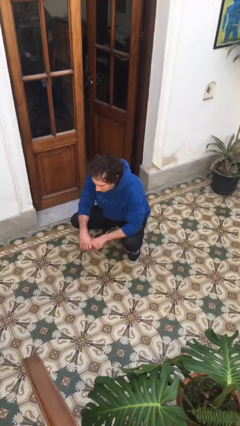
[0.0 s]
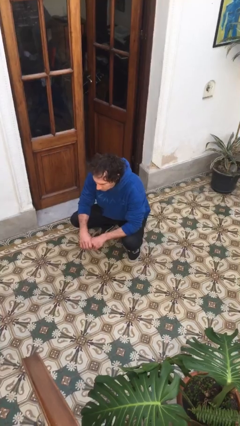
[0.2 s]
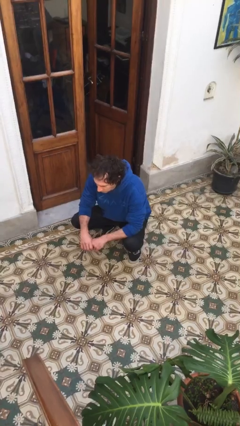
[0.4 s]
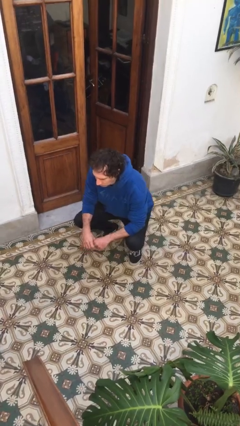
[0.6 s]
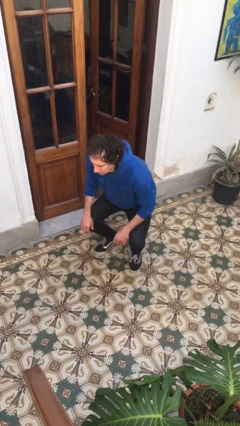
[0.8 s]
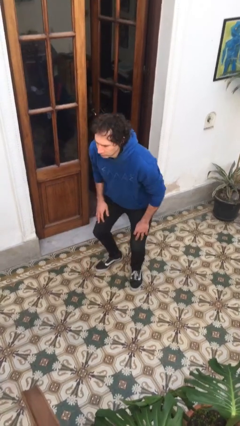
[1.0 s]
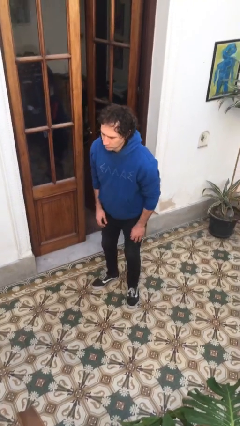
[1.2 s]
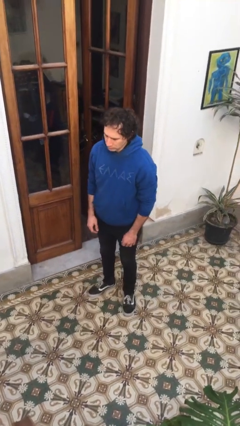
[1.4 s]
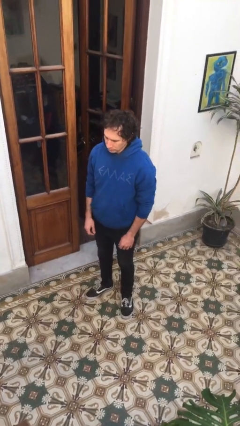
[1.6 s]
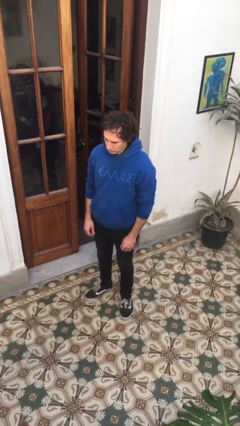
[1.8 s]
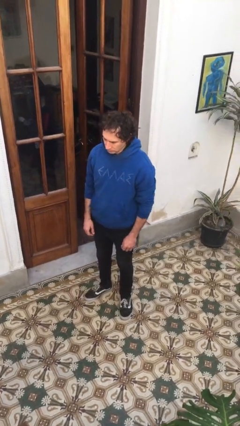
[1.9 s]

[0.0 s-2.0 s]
person stands up

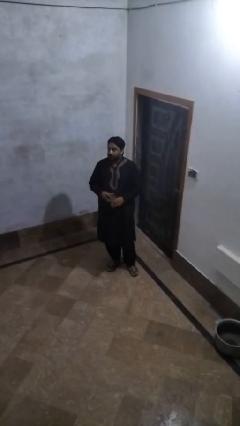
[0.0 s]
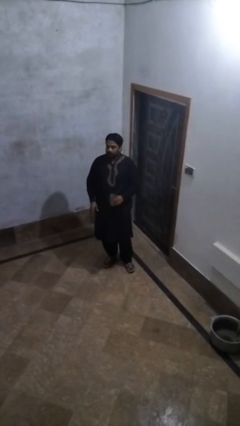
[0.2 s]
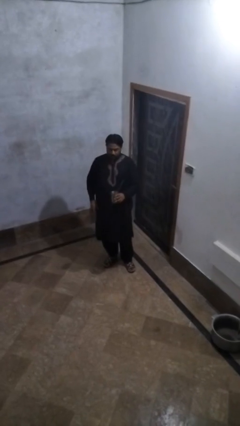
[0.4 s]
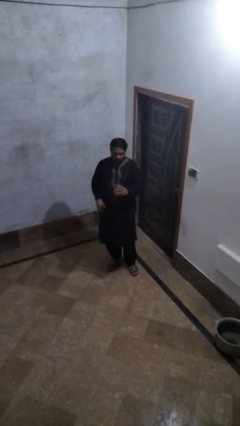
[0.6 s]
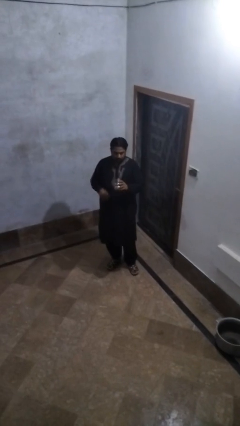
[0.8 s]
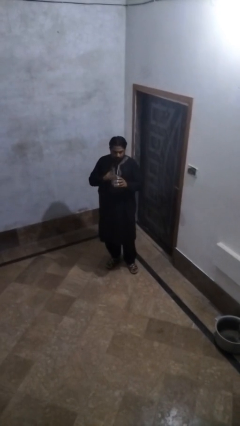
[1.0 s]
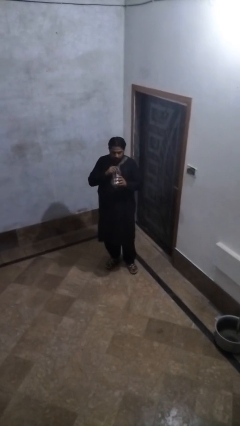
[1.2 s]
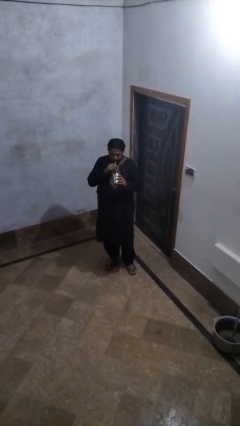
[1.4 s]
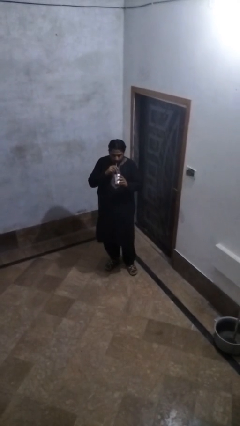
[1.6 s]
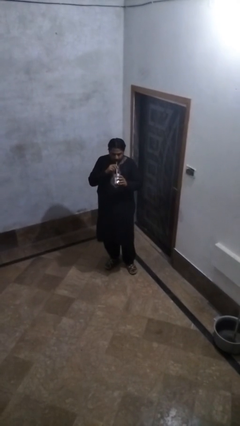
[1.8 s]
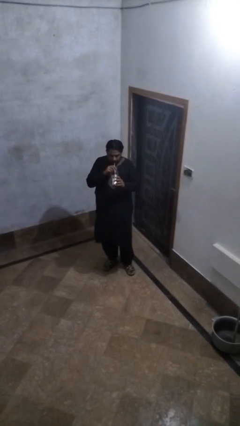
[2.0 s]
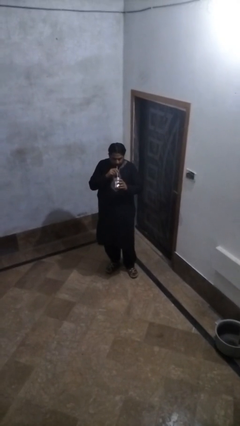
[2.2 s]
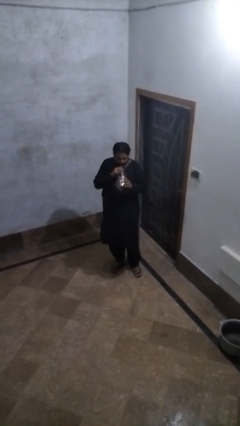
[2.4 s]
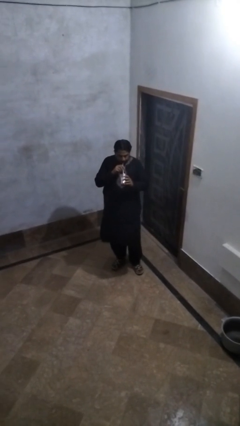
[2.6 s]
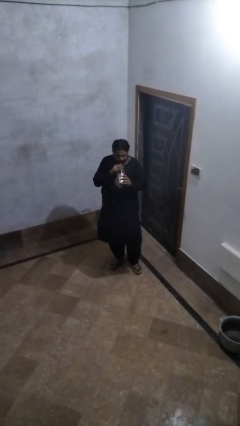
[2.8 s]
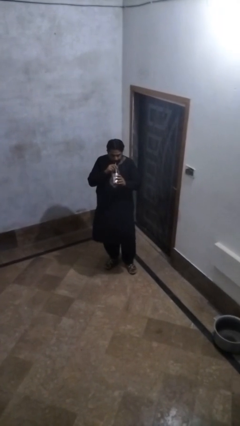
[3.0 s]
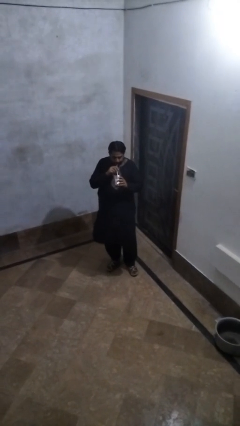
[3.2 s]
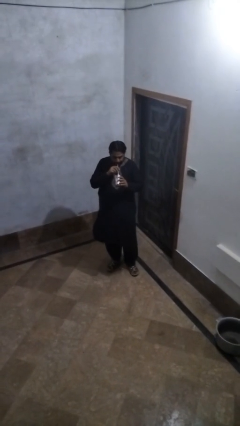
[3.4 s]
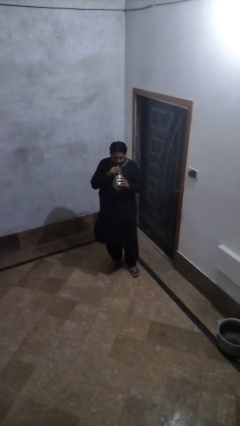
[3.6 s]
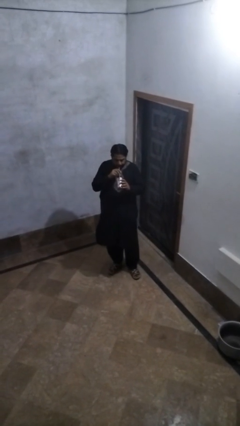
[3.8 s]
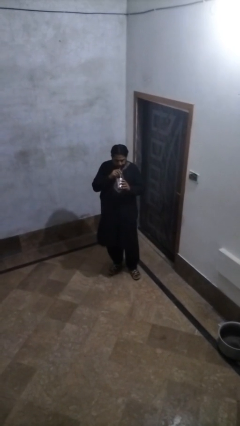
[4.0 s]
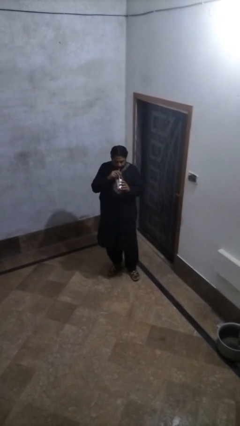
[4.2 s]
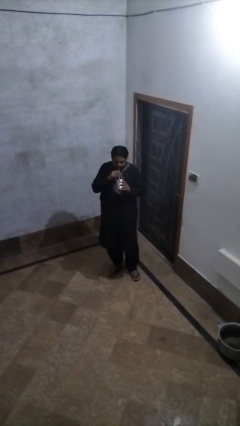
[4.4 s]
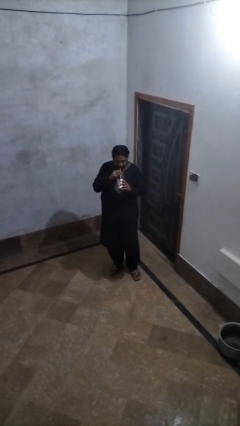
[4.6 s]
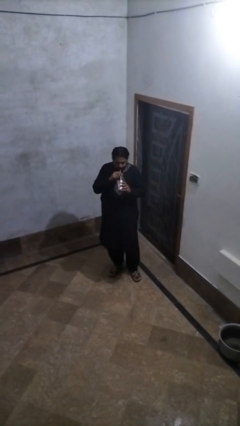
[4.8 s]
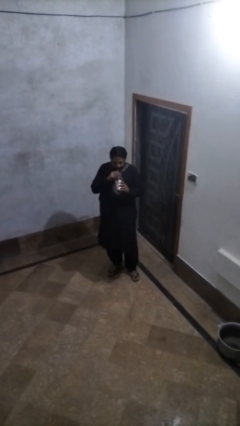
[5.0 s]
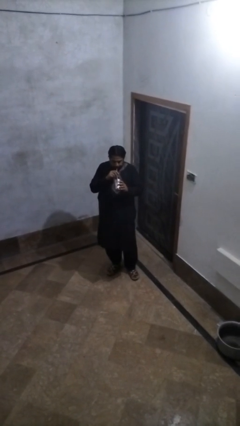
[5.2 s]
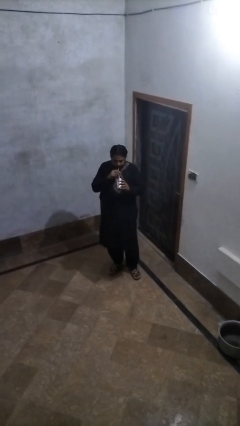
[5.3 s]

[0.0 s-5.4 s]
person drinks from straw

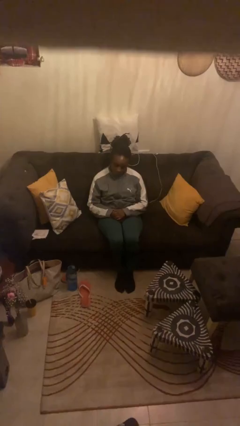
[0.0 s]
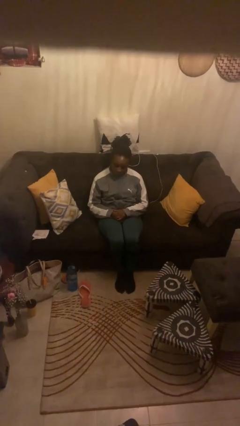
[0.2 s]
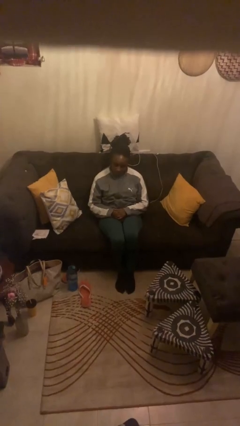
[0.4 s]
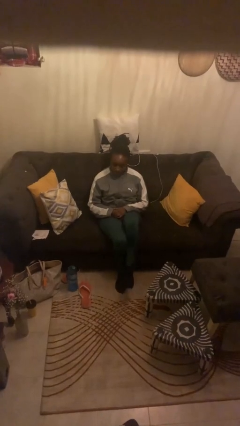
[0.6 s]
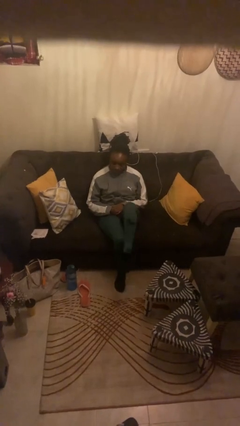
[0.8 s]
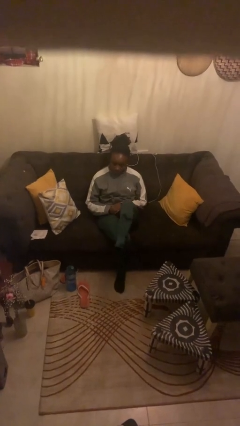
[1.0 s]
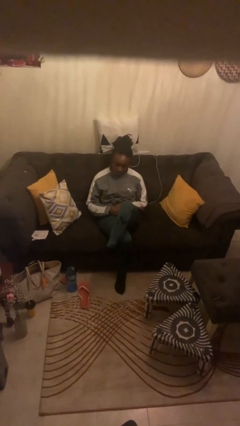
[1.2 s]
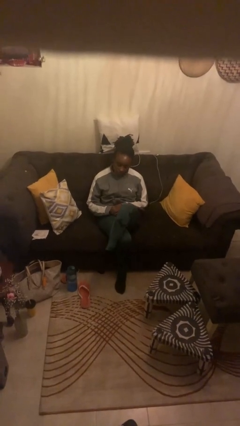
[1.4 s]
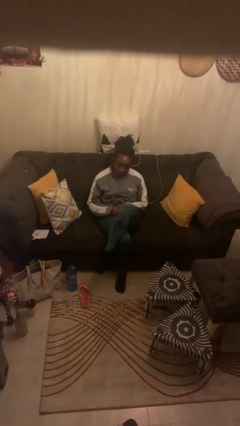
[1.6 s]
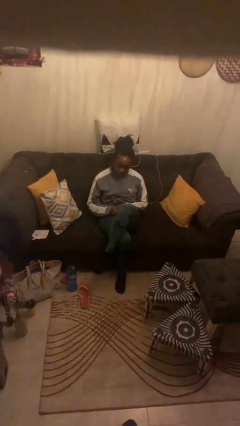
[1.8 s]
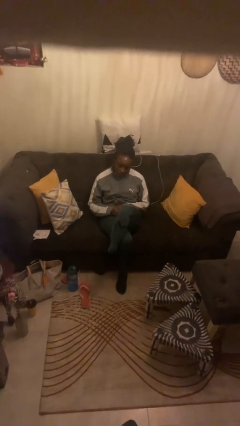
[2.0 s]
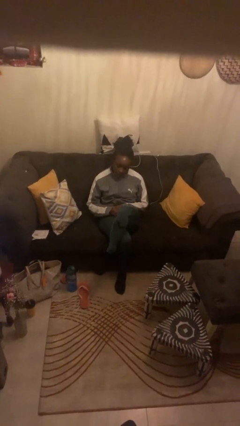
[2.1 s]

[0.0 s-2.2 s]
person crosses legs

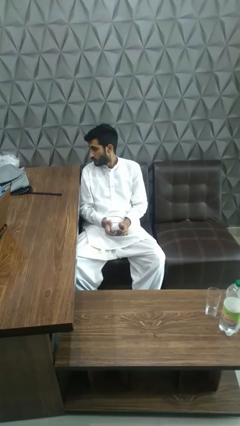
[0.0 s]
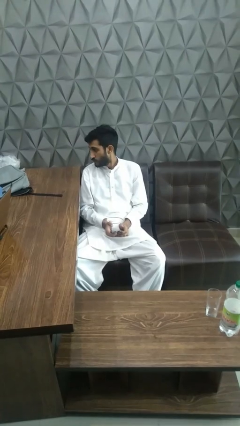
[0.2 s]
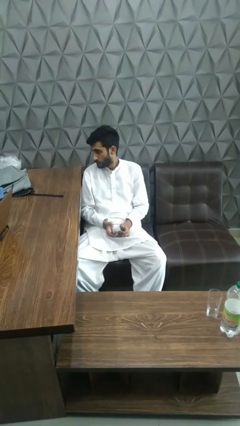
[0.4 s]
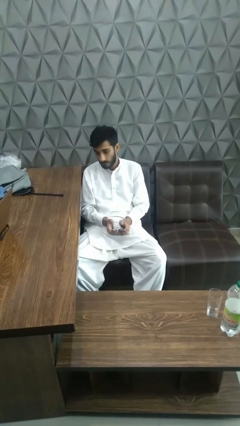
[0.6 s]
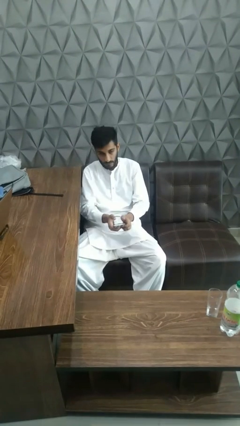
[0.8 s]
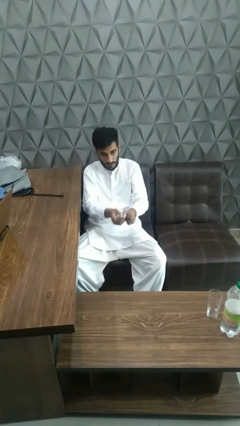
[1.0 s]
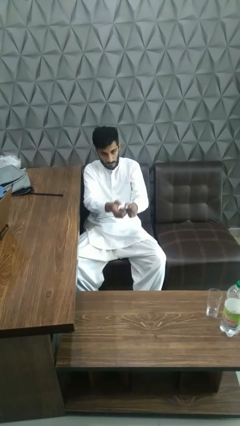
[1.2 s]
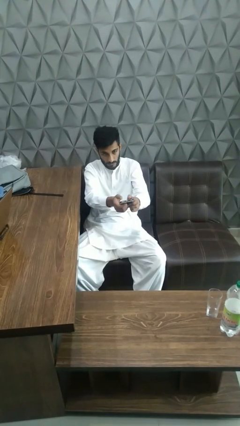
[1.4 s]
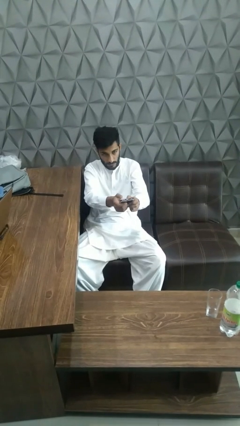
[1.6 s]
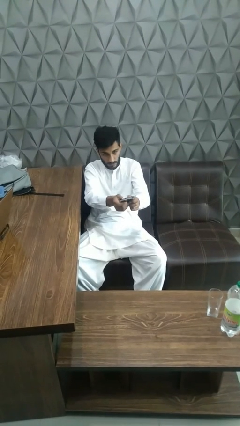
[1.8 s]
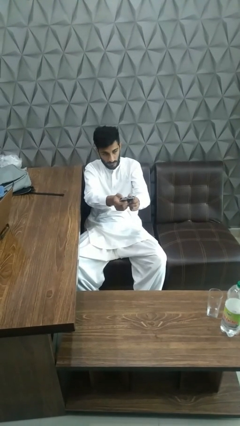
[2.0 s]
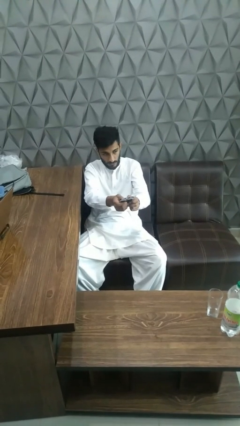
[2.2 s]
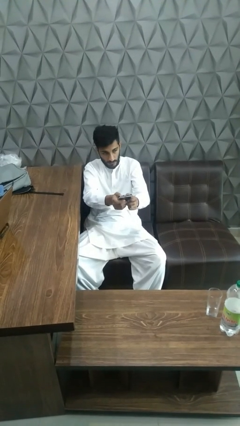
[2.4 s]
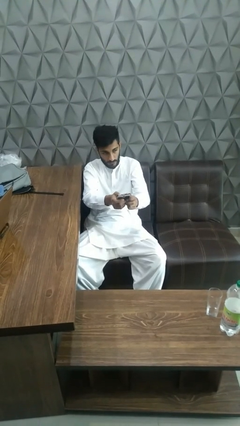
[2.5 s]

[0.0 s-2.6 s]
person uses television remote

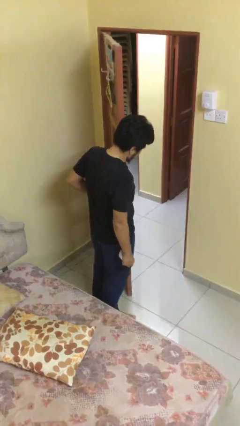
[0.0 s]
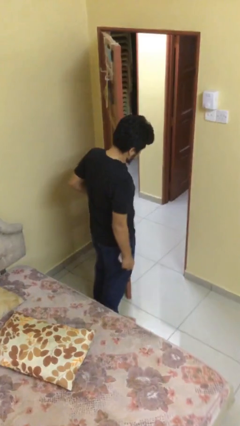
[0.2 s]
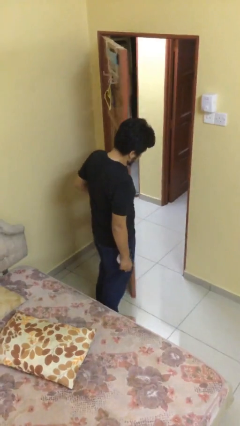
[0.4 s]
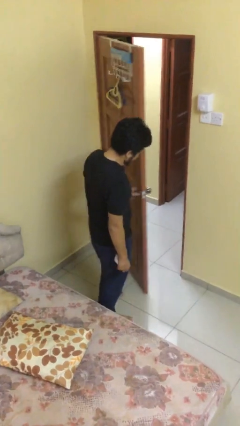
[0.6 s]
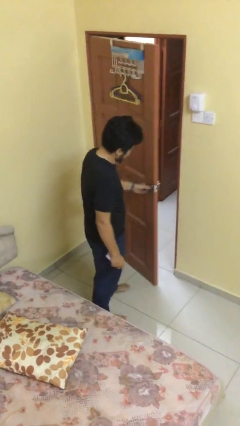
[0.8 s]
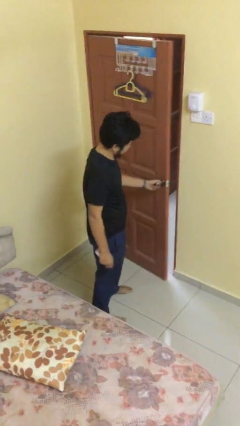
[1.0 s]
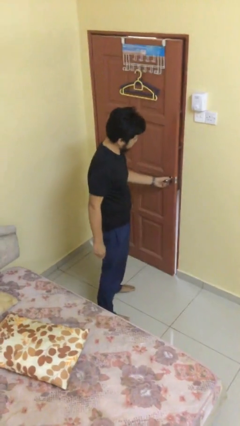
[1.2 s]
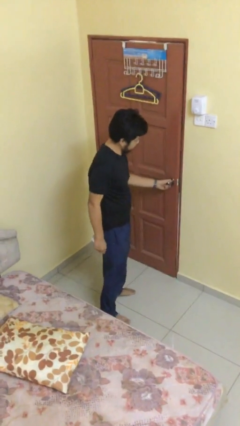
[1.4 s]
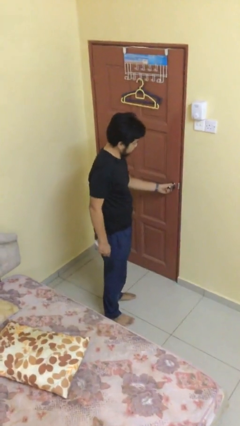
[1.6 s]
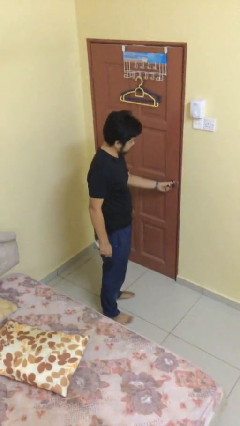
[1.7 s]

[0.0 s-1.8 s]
person closes facility door

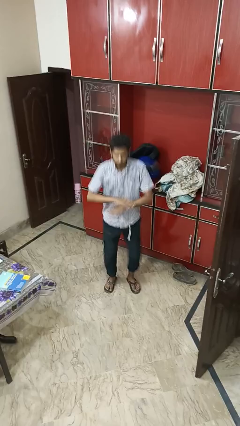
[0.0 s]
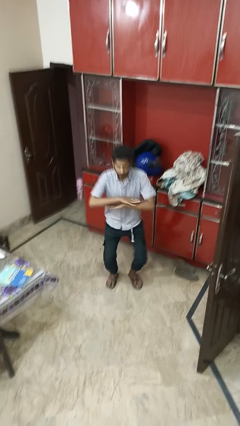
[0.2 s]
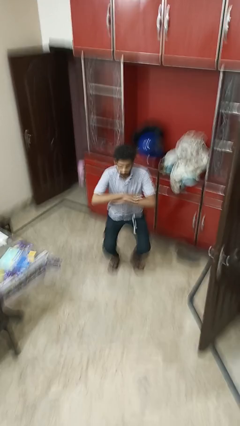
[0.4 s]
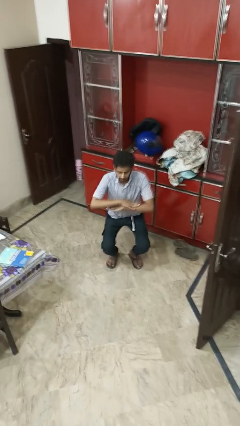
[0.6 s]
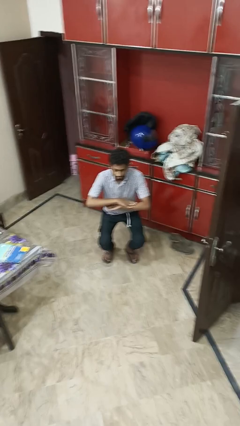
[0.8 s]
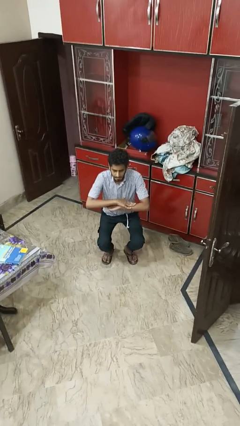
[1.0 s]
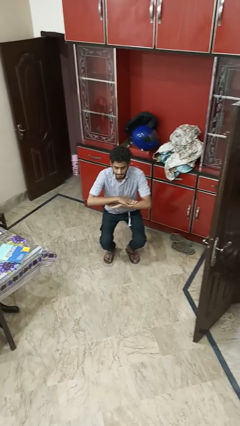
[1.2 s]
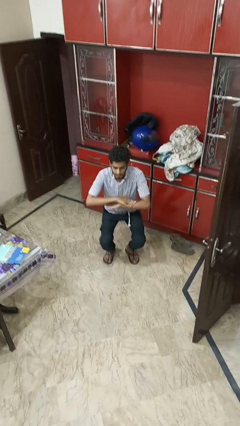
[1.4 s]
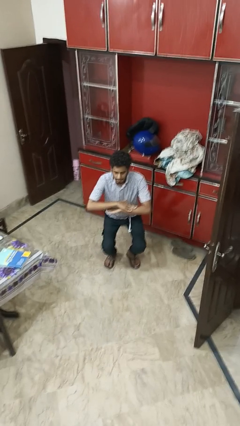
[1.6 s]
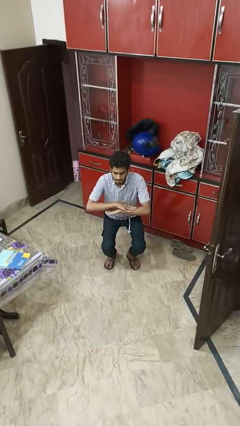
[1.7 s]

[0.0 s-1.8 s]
person squats

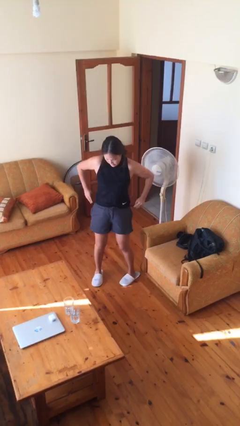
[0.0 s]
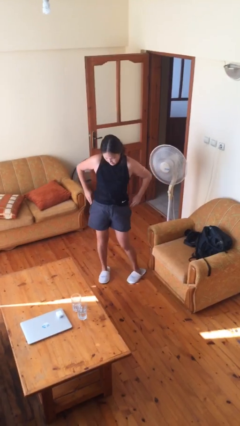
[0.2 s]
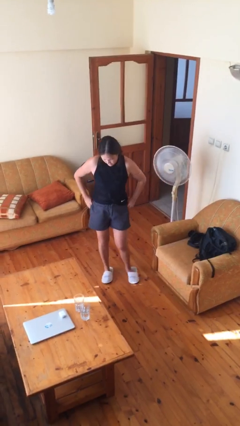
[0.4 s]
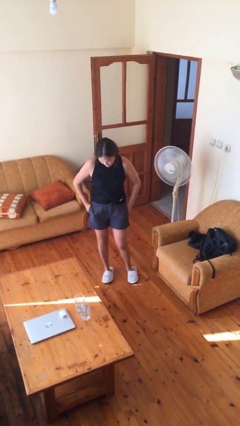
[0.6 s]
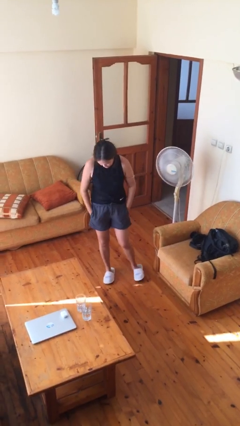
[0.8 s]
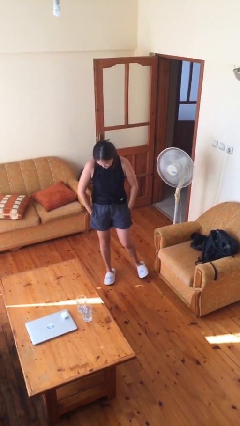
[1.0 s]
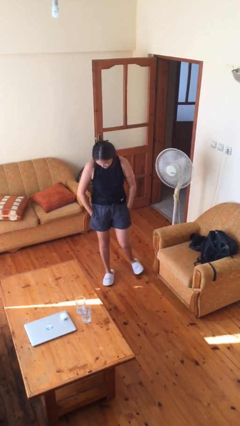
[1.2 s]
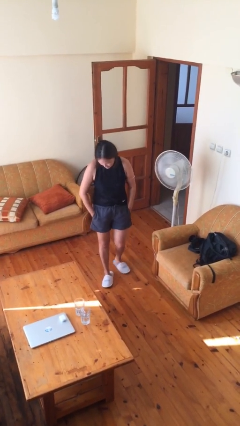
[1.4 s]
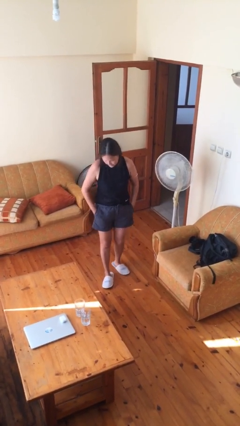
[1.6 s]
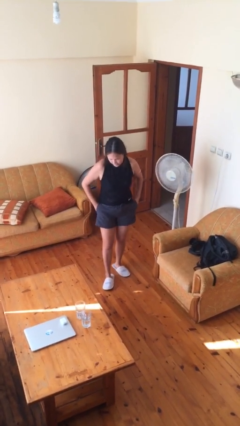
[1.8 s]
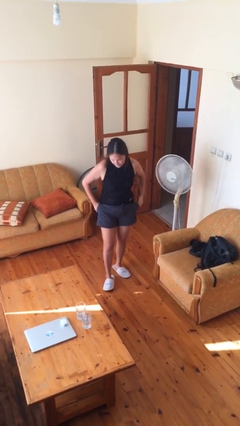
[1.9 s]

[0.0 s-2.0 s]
person puts hands in back pockets
